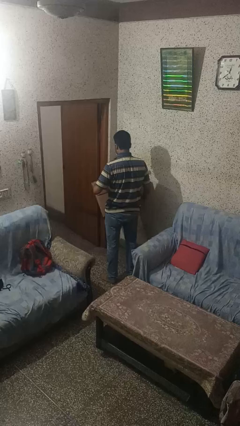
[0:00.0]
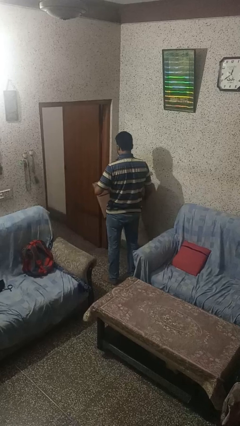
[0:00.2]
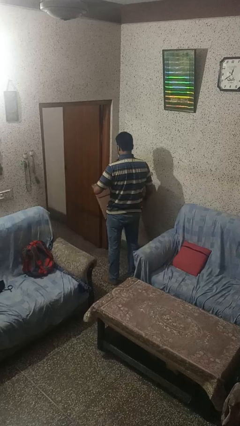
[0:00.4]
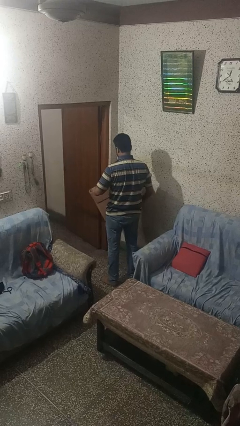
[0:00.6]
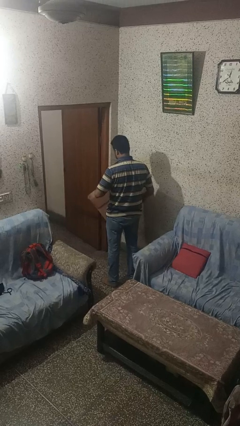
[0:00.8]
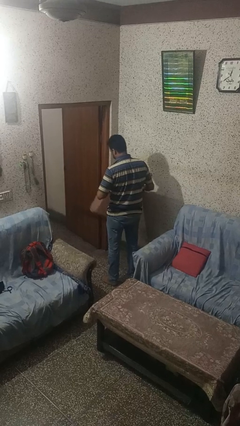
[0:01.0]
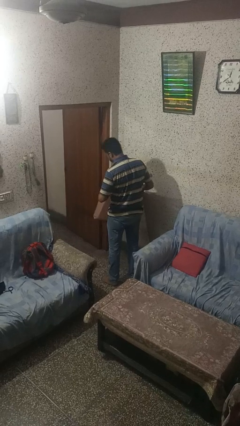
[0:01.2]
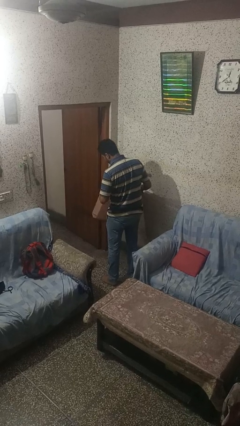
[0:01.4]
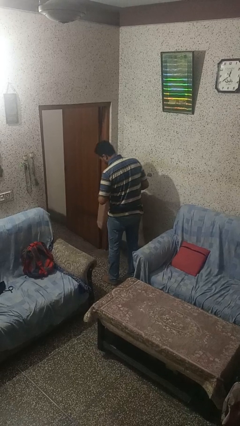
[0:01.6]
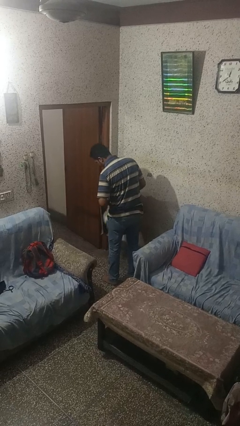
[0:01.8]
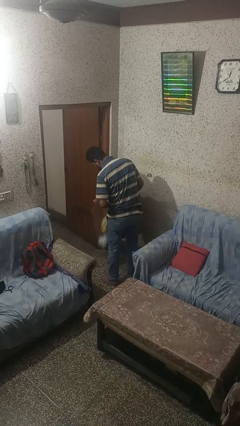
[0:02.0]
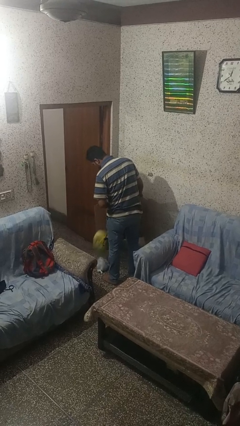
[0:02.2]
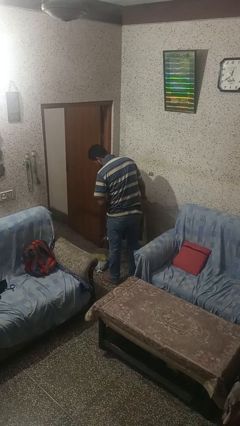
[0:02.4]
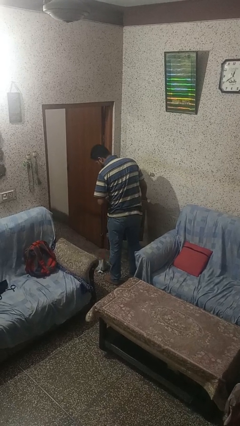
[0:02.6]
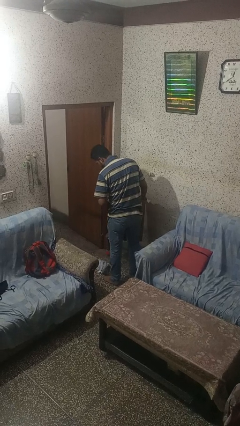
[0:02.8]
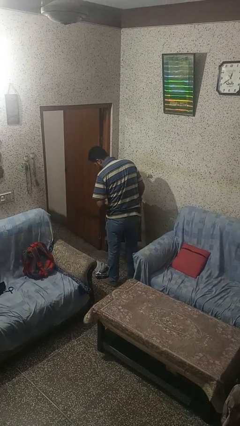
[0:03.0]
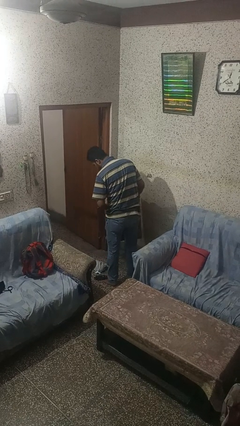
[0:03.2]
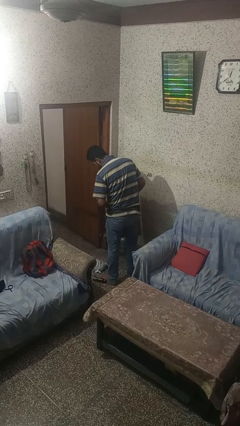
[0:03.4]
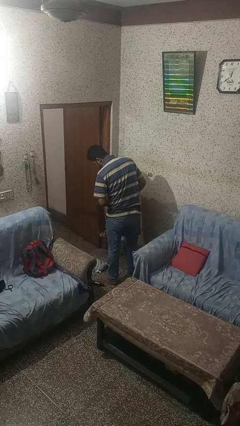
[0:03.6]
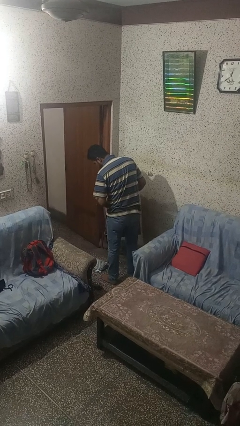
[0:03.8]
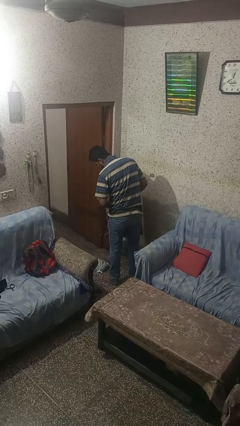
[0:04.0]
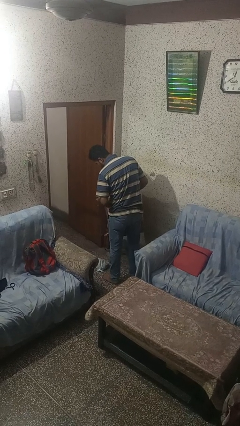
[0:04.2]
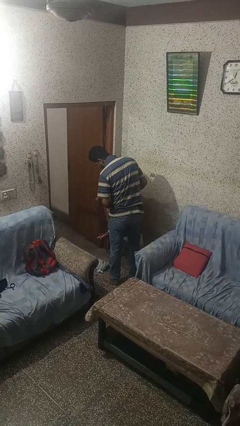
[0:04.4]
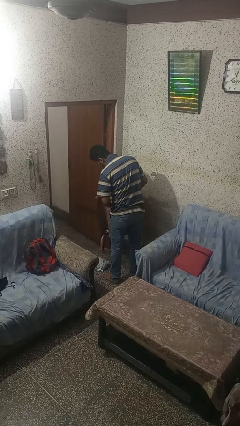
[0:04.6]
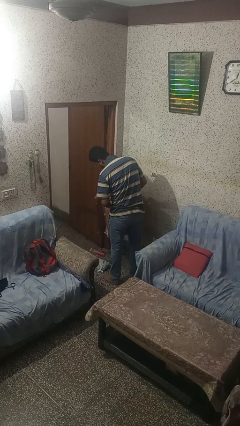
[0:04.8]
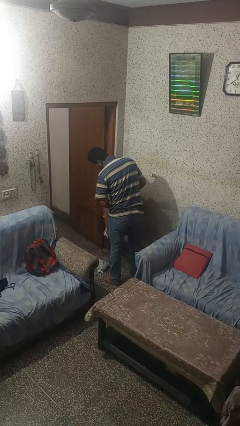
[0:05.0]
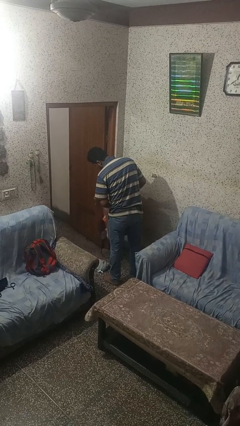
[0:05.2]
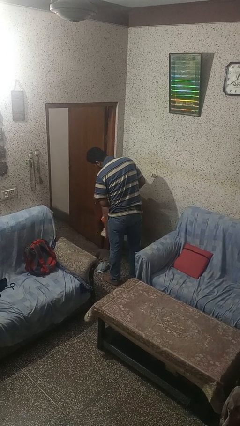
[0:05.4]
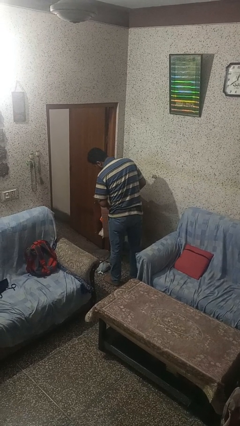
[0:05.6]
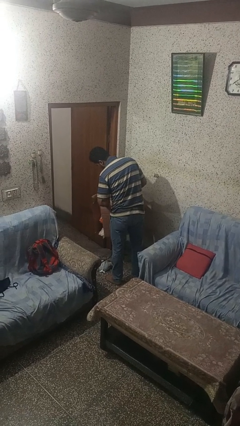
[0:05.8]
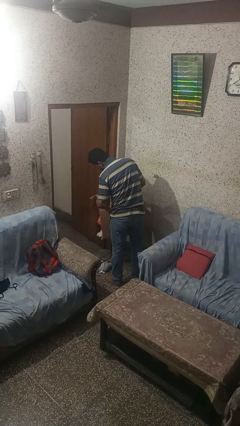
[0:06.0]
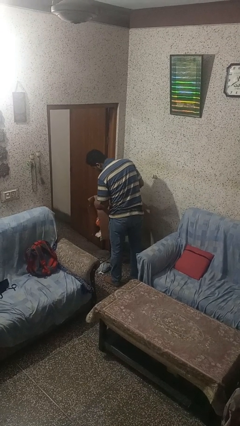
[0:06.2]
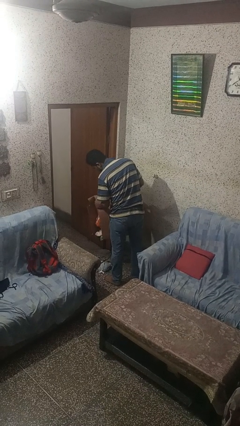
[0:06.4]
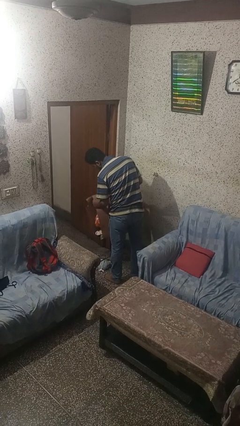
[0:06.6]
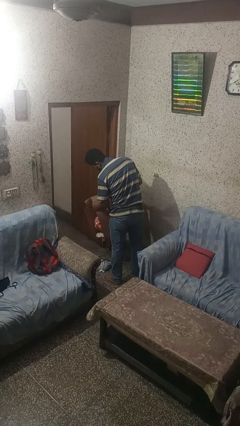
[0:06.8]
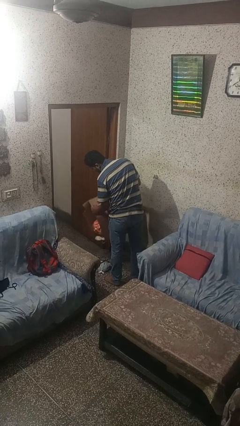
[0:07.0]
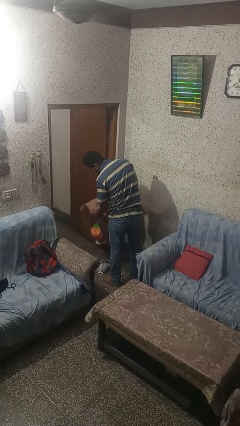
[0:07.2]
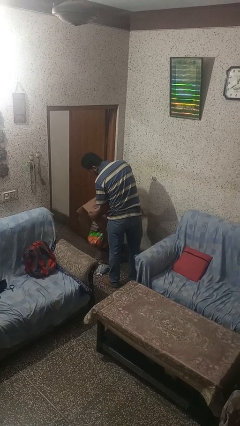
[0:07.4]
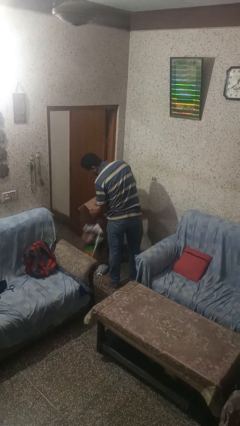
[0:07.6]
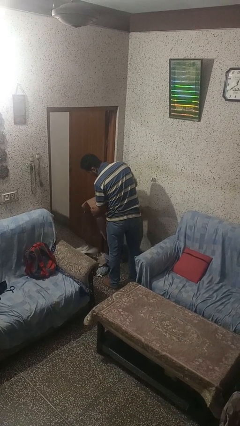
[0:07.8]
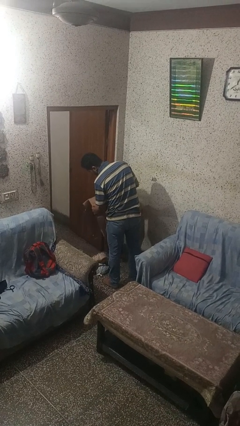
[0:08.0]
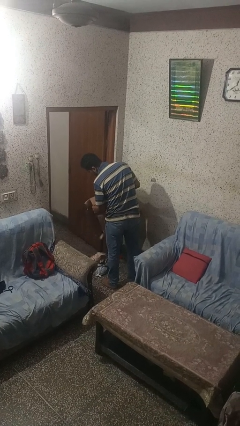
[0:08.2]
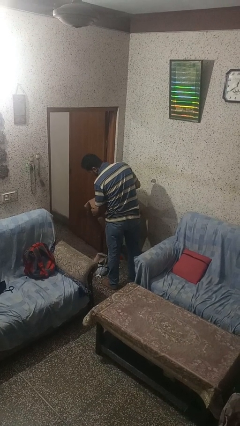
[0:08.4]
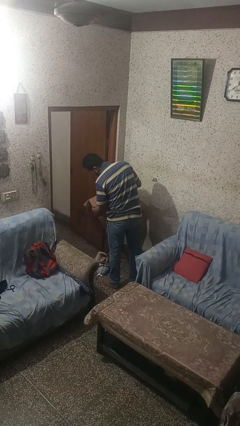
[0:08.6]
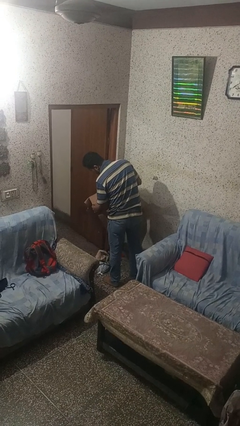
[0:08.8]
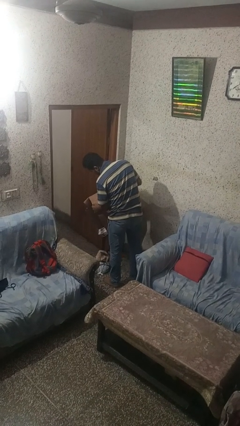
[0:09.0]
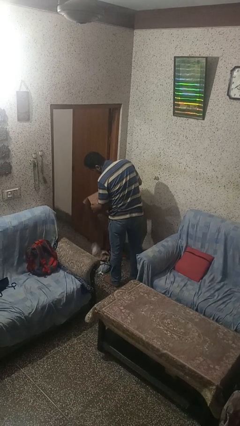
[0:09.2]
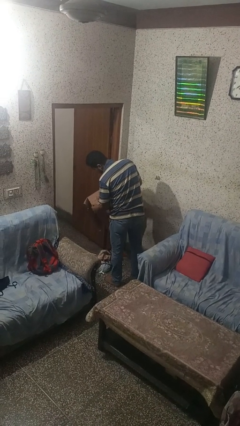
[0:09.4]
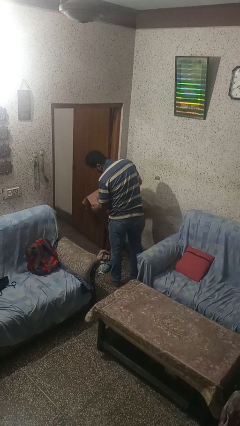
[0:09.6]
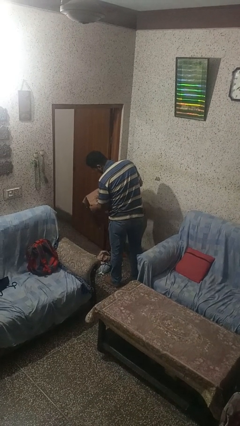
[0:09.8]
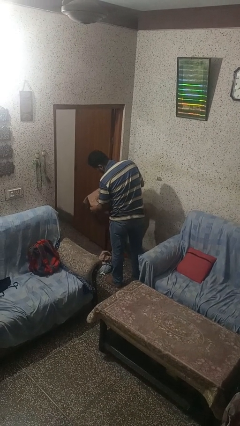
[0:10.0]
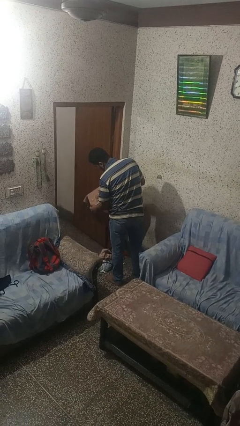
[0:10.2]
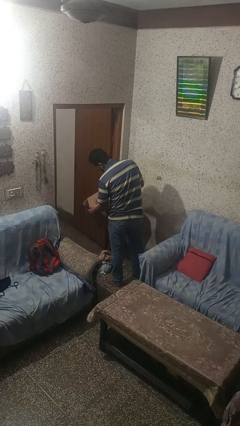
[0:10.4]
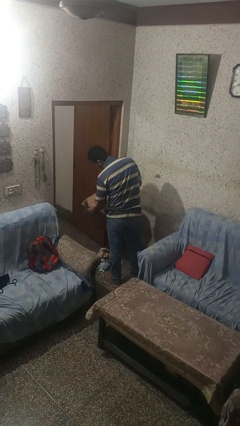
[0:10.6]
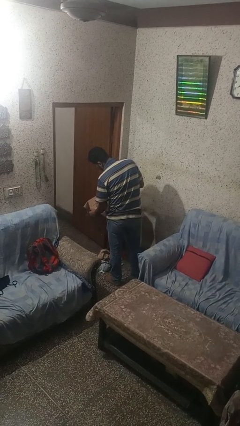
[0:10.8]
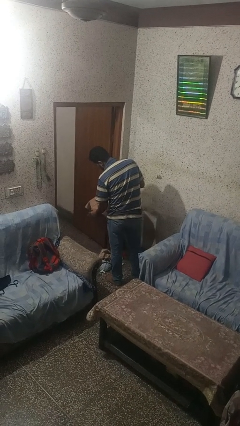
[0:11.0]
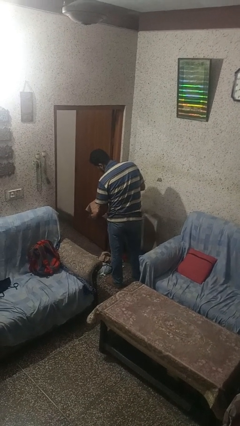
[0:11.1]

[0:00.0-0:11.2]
person unloads box onto floor

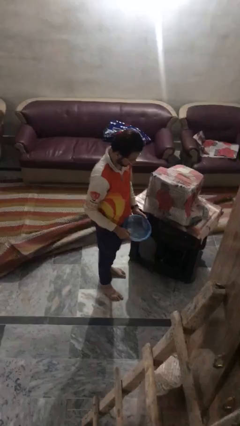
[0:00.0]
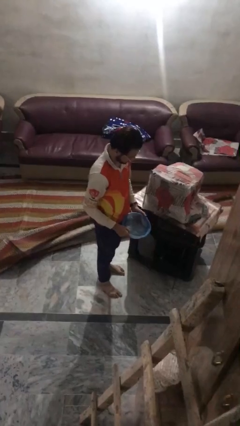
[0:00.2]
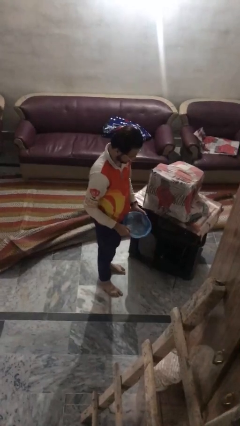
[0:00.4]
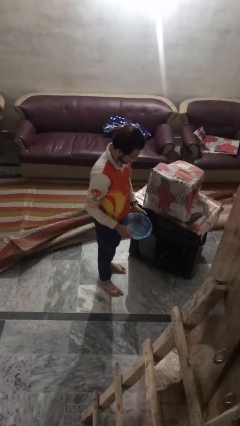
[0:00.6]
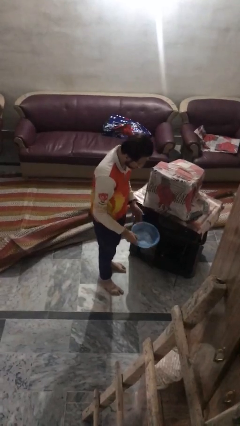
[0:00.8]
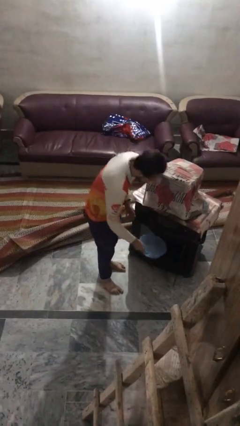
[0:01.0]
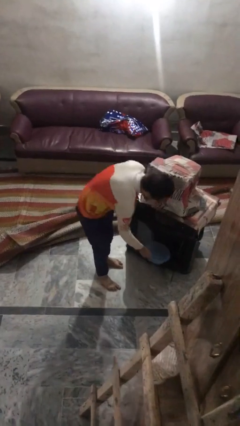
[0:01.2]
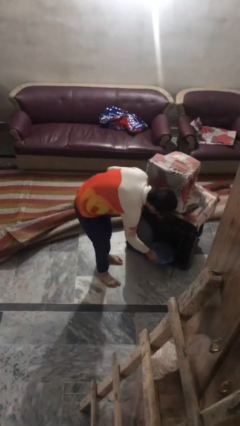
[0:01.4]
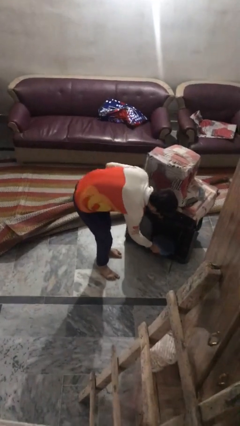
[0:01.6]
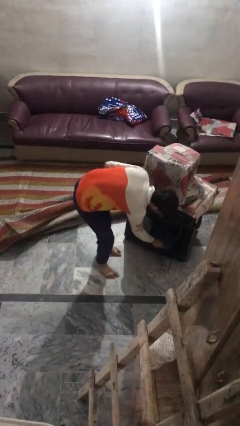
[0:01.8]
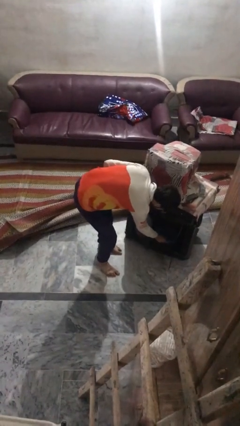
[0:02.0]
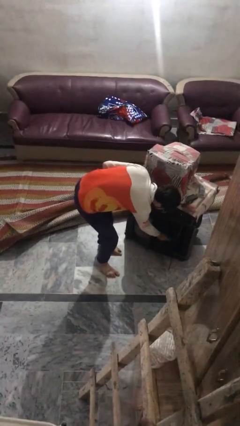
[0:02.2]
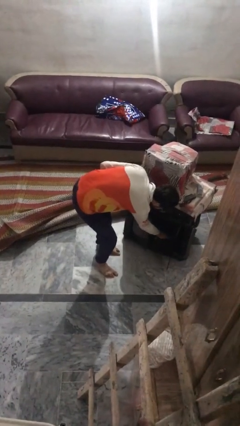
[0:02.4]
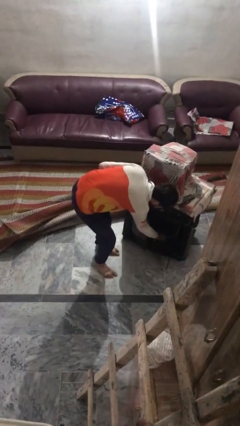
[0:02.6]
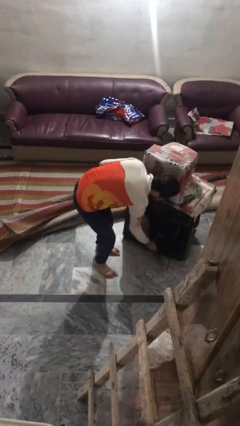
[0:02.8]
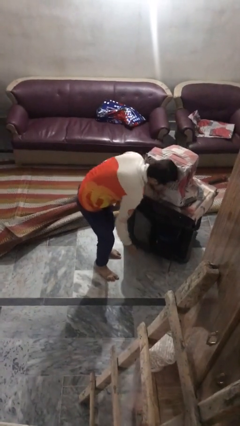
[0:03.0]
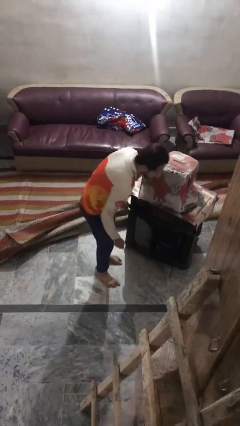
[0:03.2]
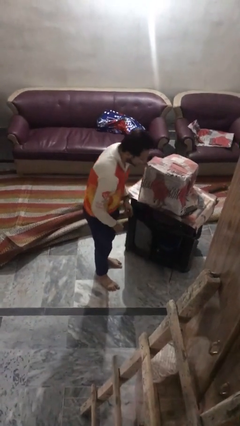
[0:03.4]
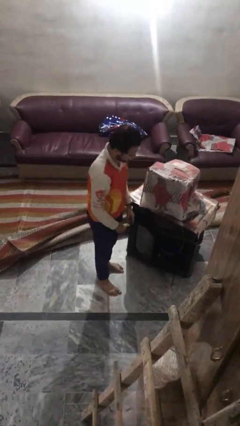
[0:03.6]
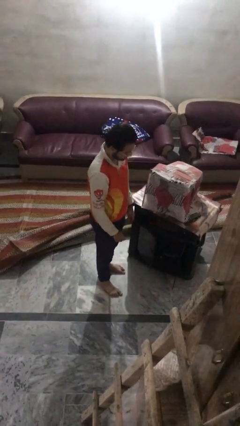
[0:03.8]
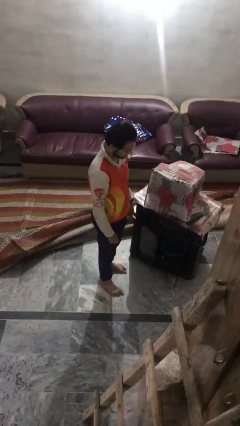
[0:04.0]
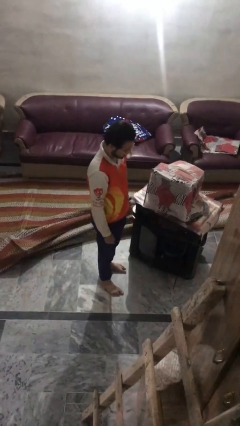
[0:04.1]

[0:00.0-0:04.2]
person puts down object into cabinet

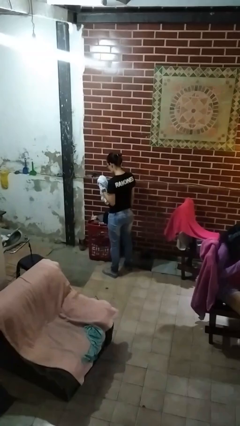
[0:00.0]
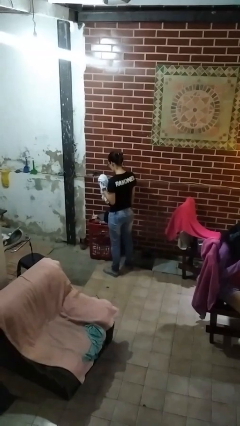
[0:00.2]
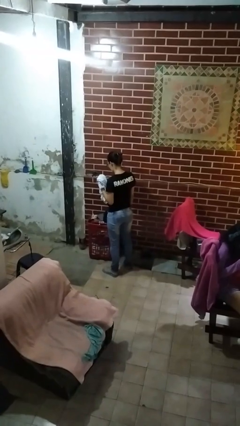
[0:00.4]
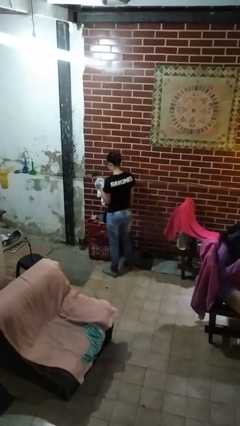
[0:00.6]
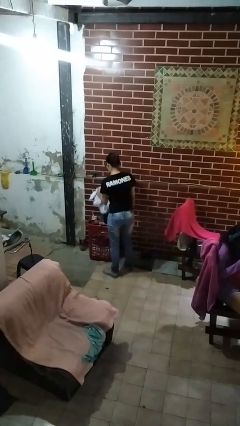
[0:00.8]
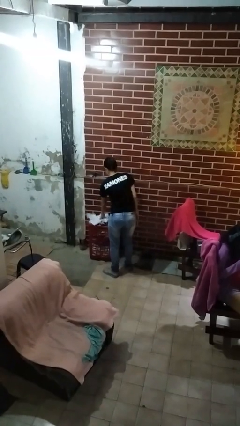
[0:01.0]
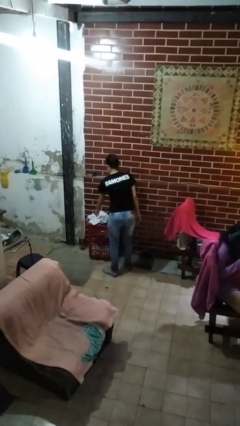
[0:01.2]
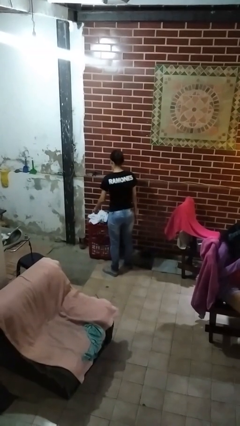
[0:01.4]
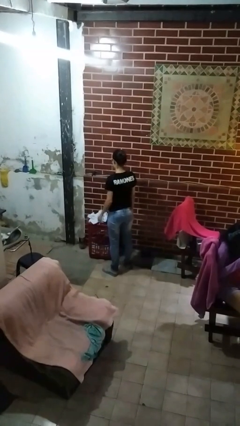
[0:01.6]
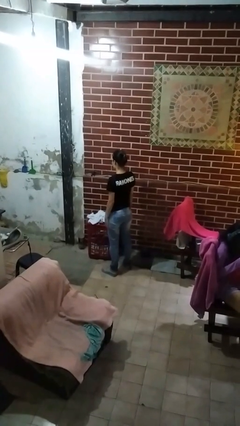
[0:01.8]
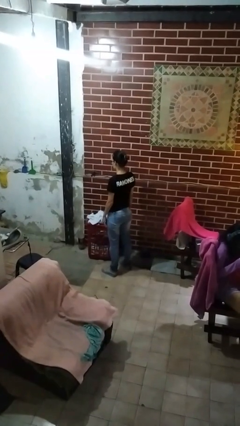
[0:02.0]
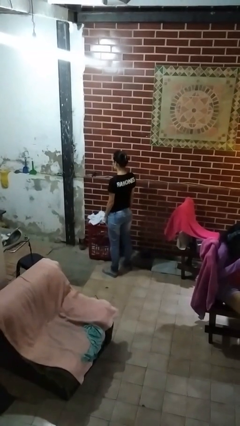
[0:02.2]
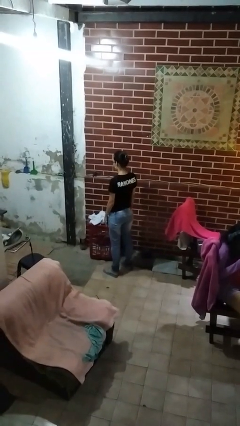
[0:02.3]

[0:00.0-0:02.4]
person puts object into basket
